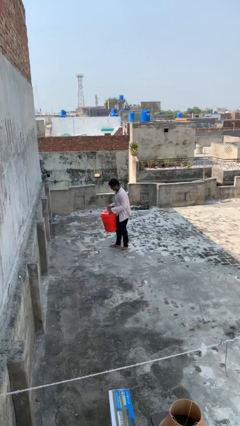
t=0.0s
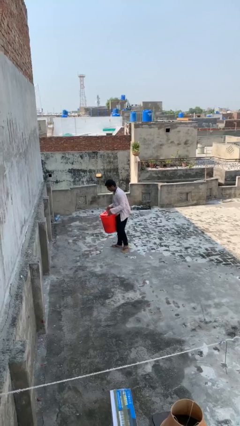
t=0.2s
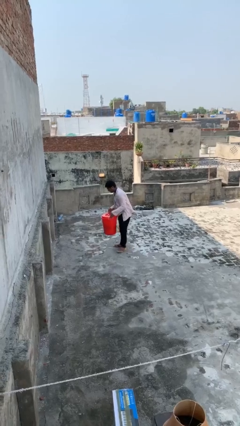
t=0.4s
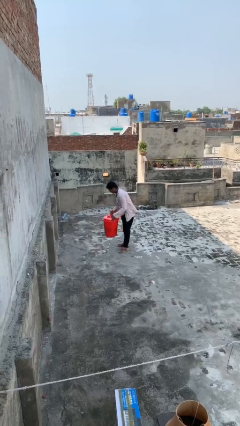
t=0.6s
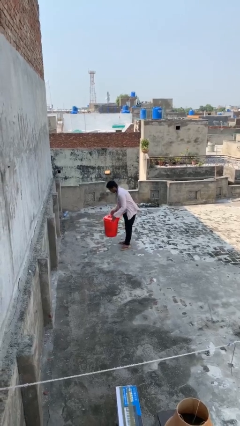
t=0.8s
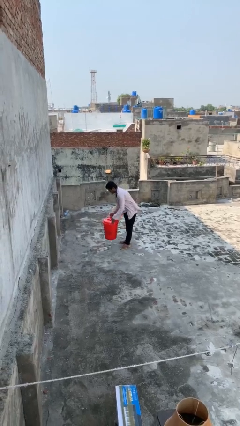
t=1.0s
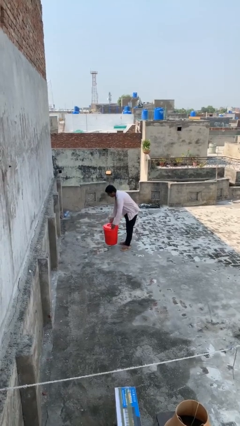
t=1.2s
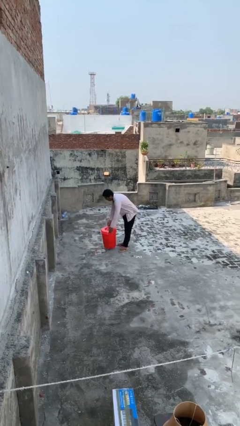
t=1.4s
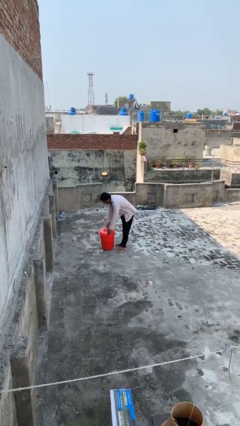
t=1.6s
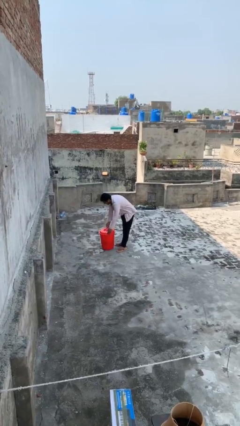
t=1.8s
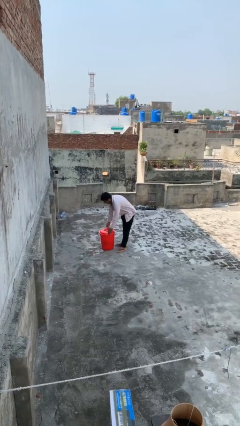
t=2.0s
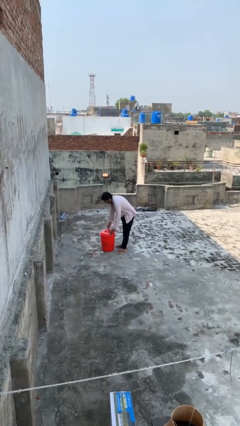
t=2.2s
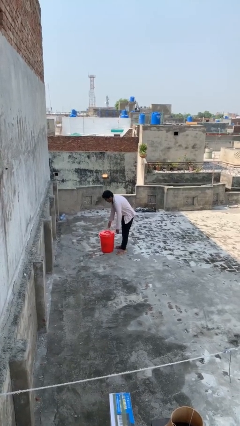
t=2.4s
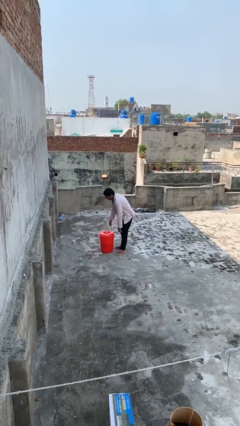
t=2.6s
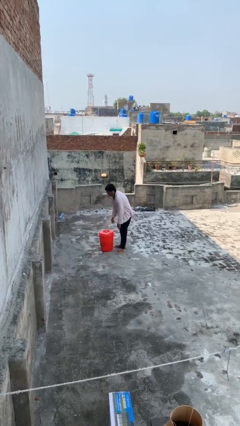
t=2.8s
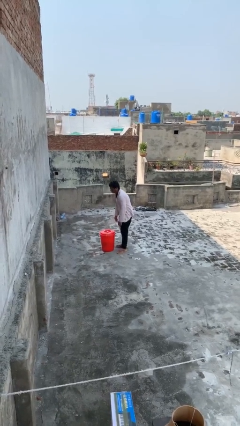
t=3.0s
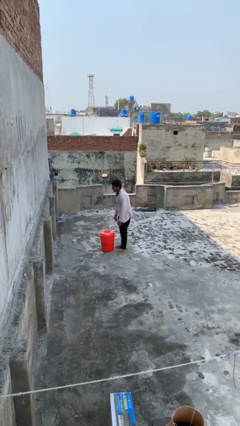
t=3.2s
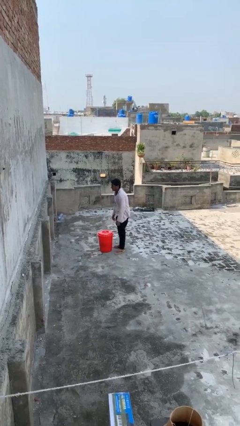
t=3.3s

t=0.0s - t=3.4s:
person puts down object on floor

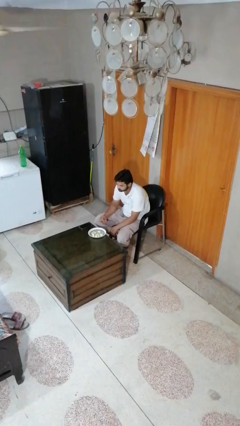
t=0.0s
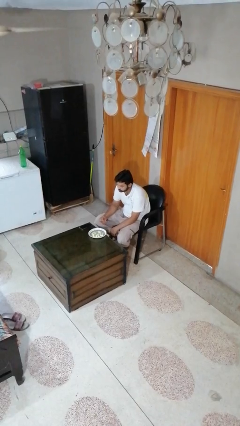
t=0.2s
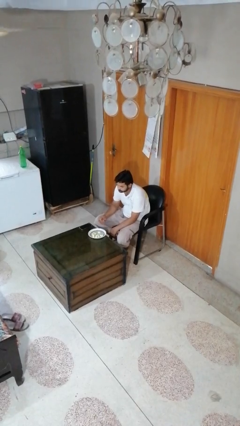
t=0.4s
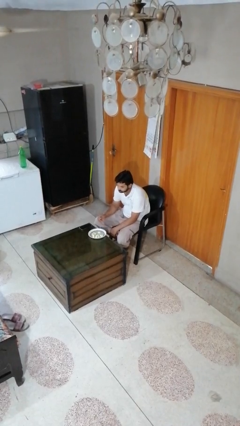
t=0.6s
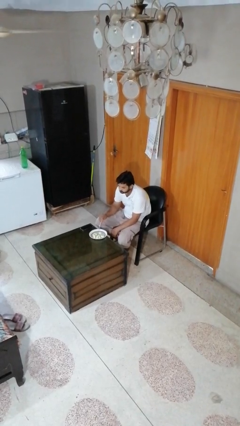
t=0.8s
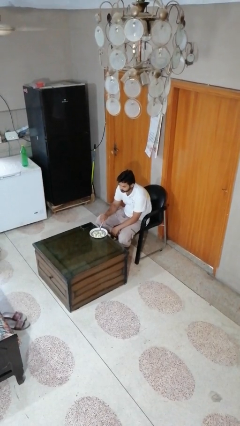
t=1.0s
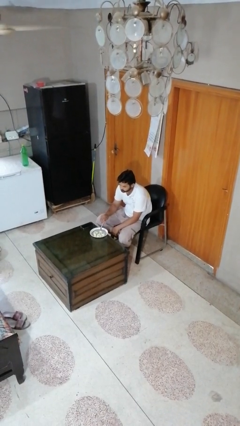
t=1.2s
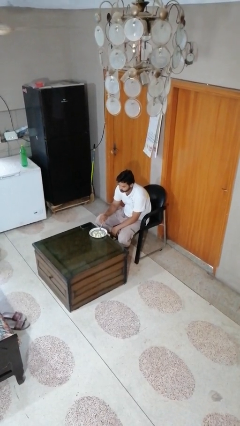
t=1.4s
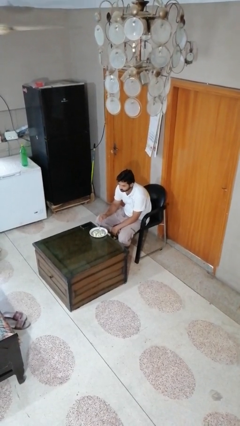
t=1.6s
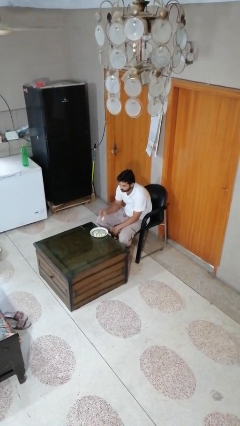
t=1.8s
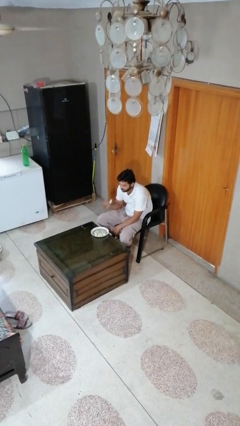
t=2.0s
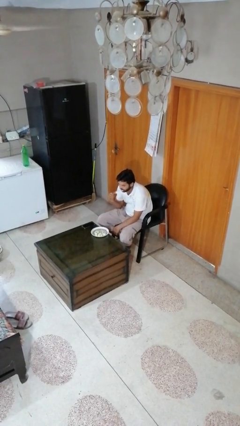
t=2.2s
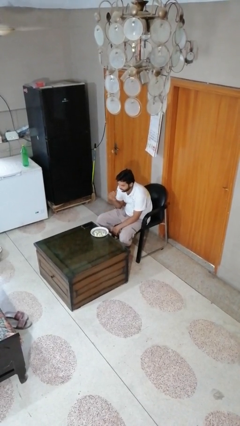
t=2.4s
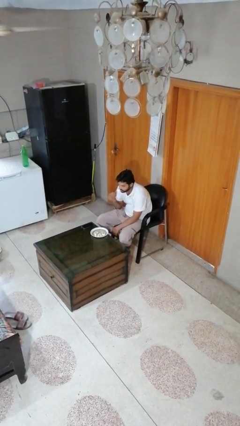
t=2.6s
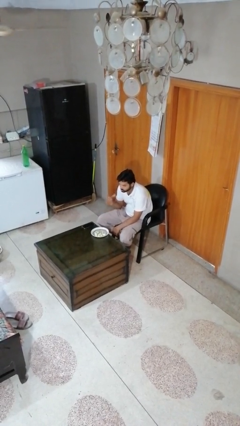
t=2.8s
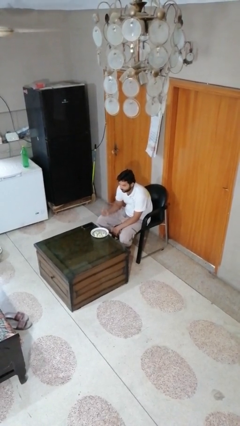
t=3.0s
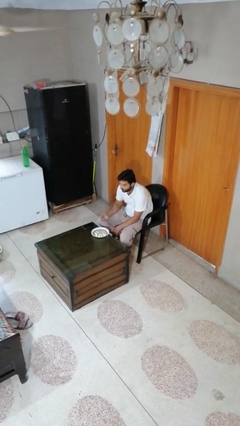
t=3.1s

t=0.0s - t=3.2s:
person eats with utensil

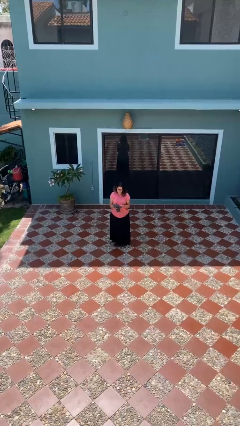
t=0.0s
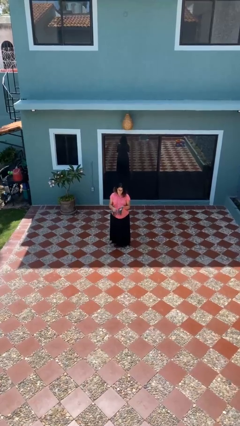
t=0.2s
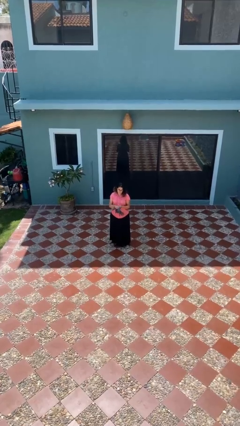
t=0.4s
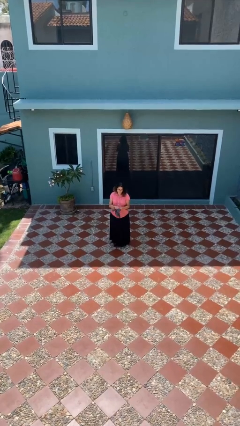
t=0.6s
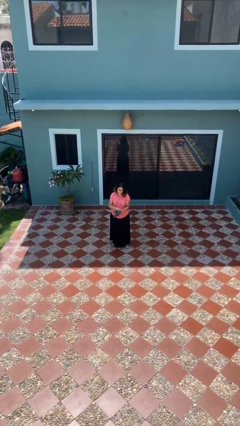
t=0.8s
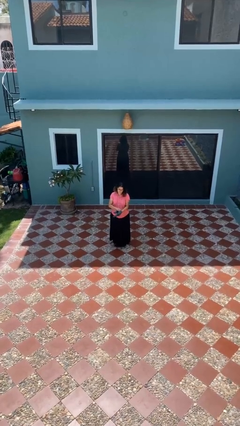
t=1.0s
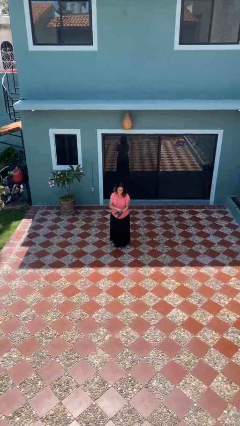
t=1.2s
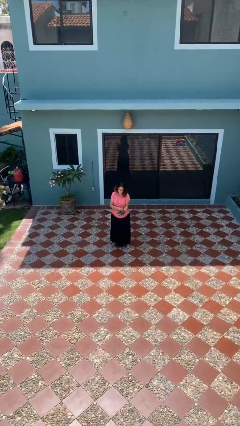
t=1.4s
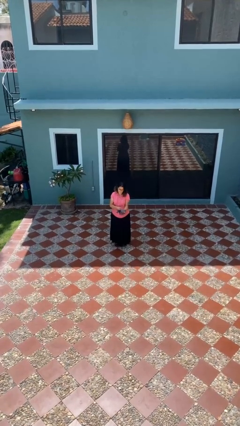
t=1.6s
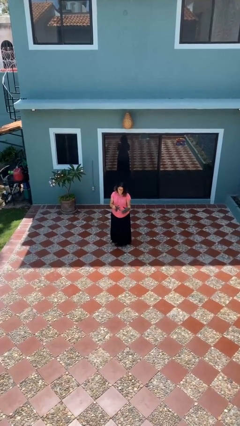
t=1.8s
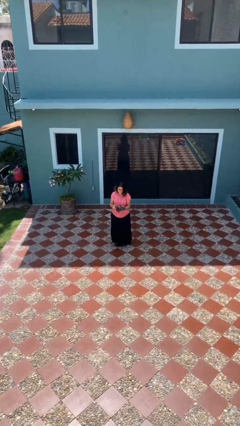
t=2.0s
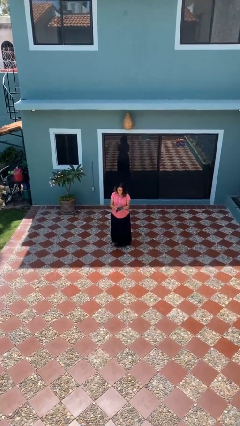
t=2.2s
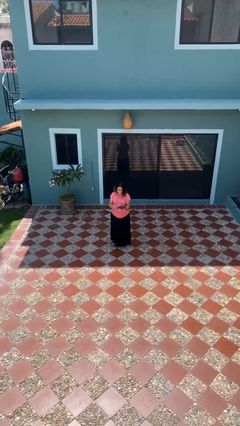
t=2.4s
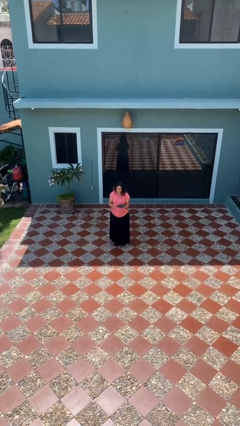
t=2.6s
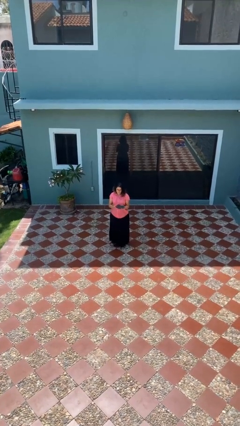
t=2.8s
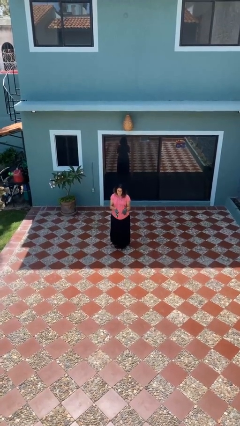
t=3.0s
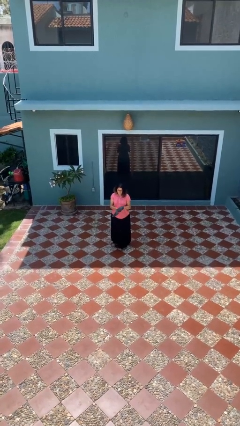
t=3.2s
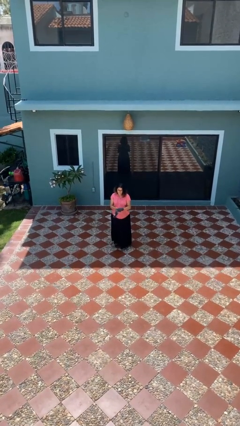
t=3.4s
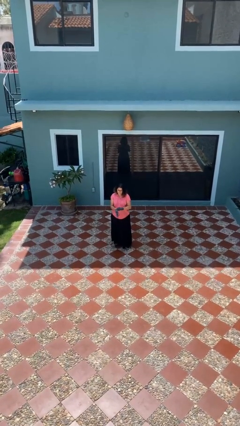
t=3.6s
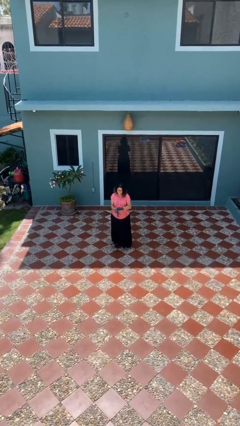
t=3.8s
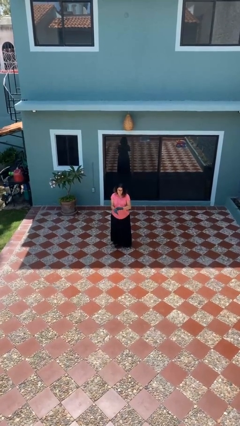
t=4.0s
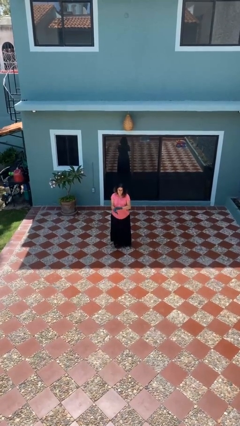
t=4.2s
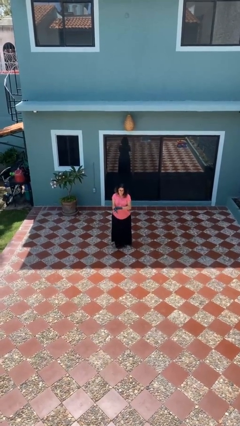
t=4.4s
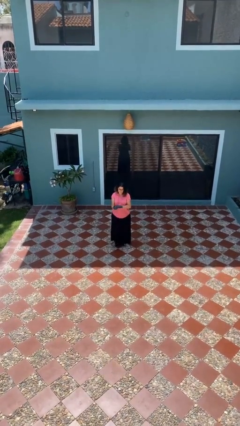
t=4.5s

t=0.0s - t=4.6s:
person puts on gloves

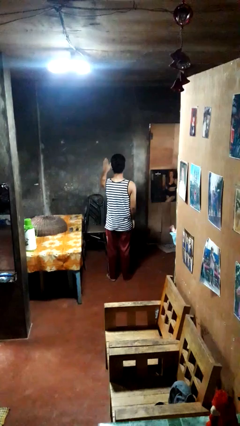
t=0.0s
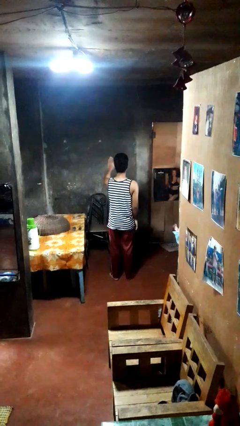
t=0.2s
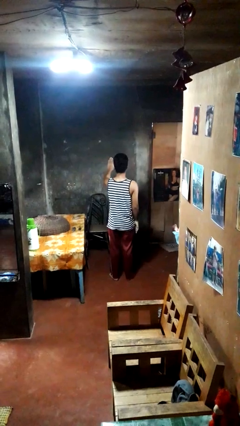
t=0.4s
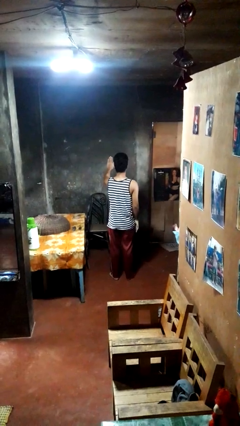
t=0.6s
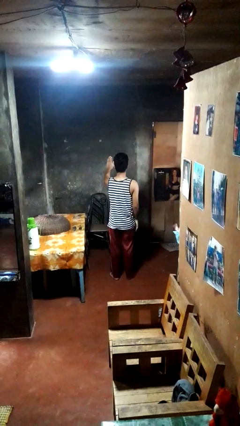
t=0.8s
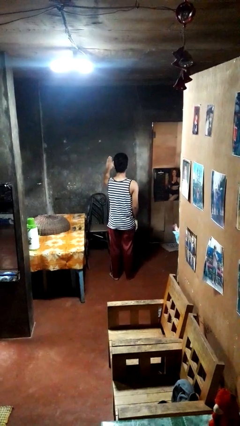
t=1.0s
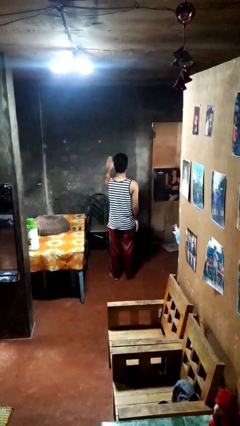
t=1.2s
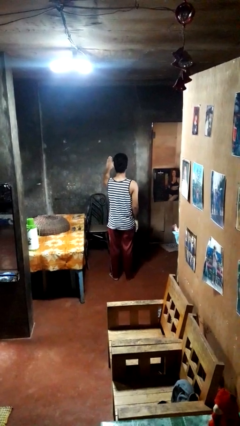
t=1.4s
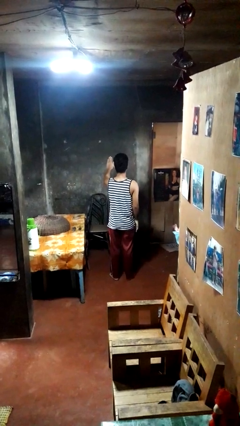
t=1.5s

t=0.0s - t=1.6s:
person gestures stop

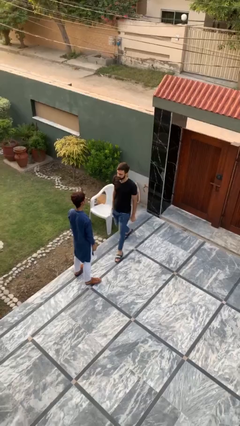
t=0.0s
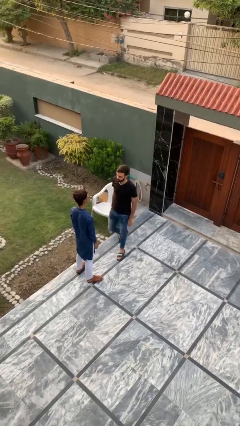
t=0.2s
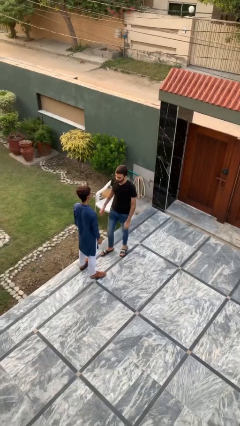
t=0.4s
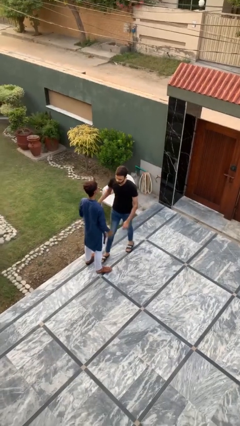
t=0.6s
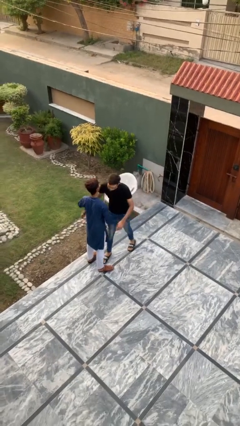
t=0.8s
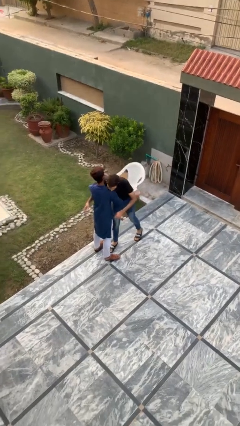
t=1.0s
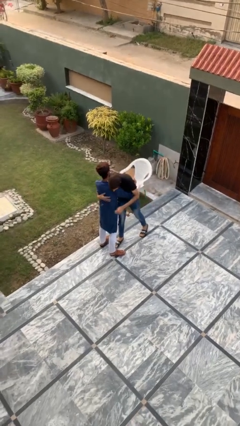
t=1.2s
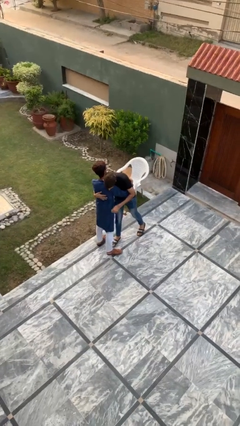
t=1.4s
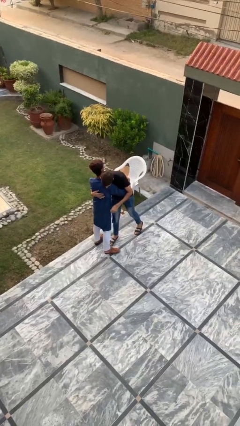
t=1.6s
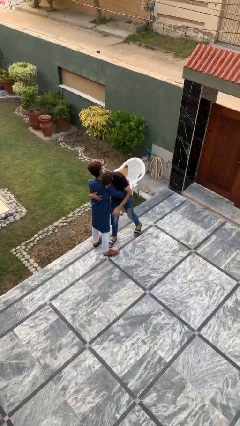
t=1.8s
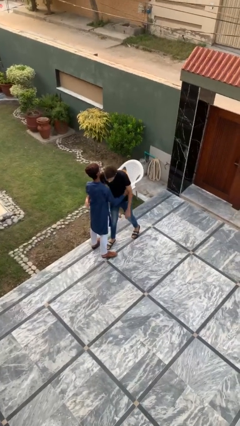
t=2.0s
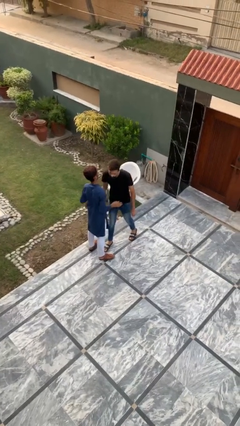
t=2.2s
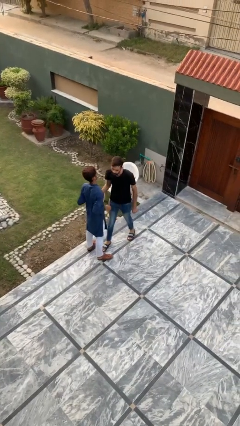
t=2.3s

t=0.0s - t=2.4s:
person embraces person

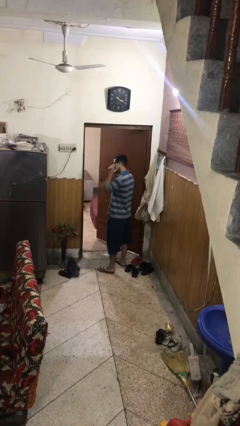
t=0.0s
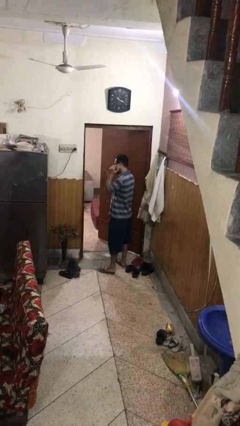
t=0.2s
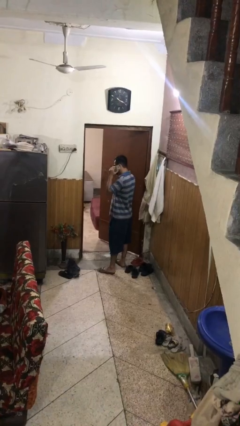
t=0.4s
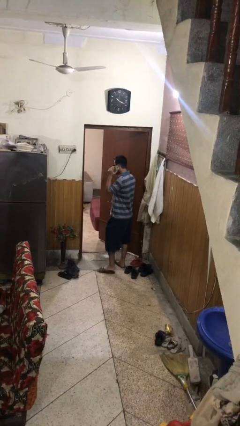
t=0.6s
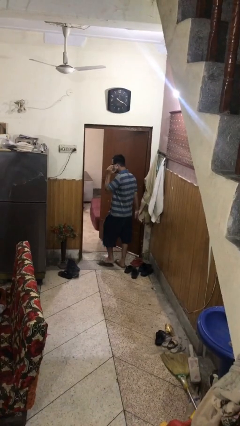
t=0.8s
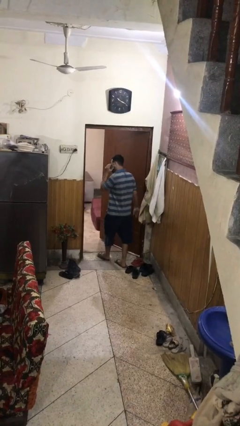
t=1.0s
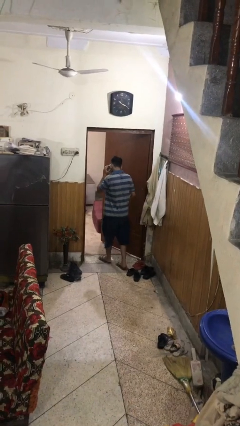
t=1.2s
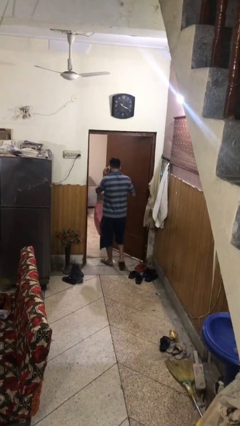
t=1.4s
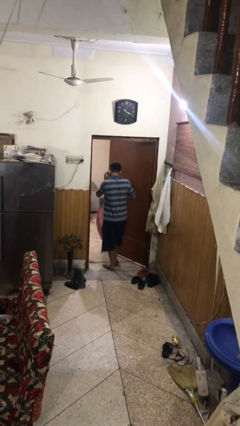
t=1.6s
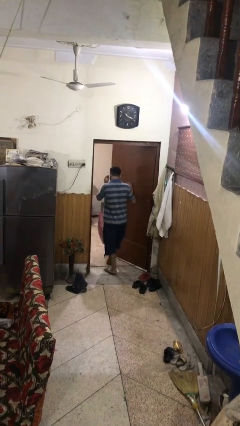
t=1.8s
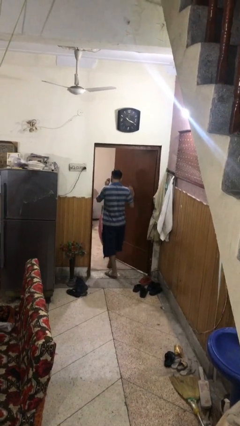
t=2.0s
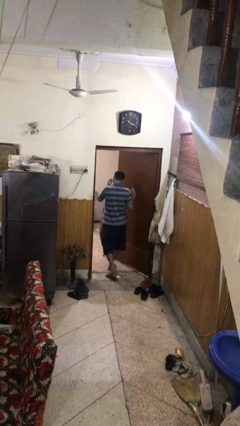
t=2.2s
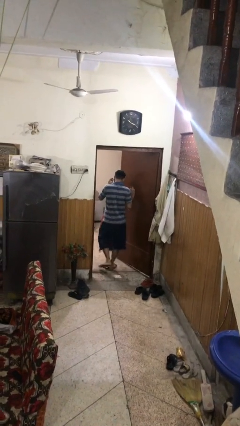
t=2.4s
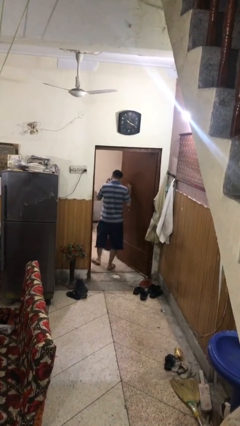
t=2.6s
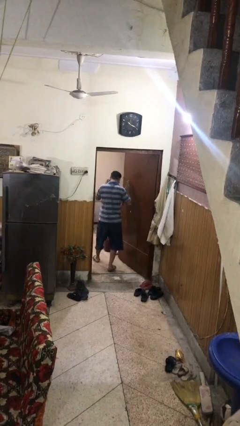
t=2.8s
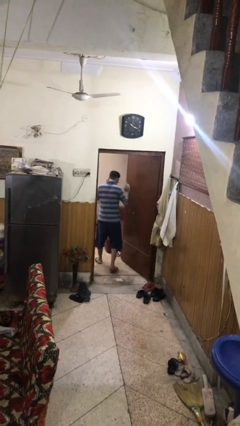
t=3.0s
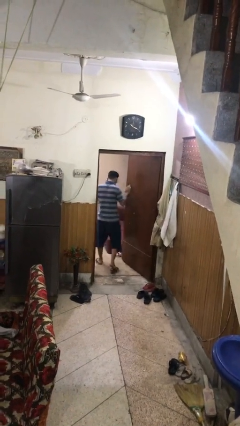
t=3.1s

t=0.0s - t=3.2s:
person exits scene through structure
